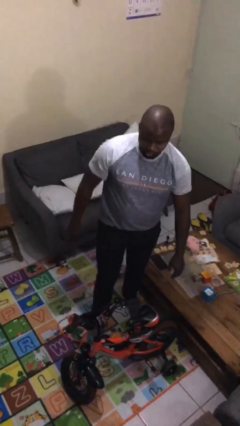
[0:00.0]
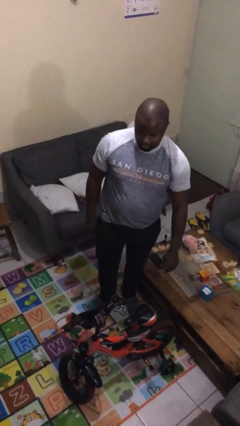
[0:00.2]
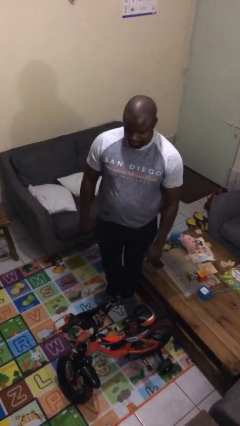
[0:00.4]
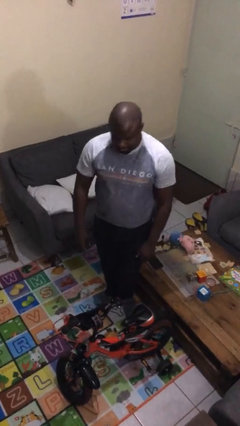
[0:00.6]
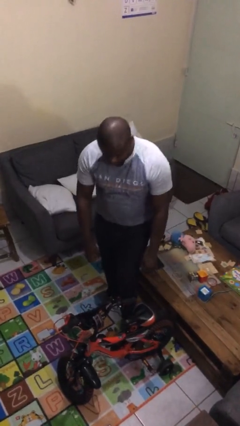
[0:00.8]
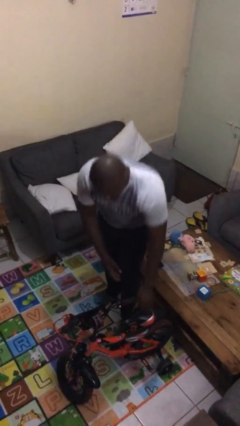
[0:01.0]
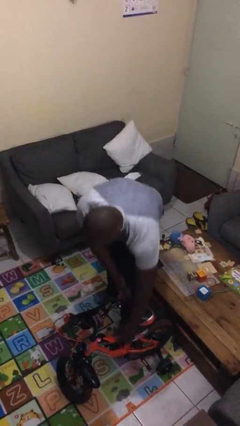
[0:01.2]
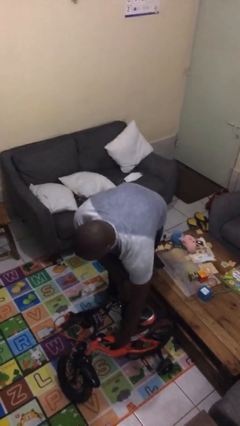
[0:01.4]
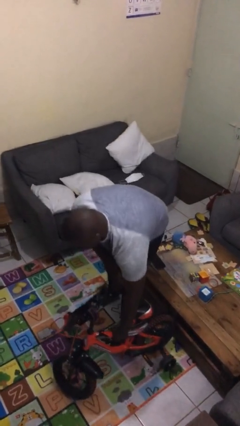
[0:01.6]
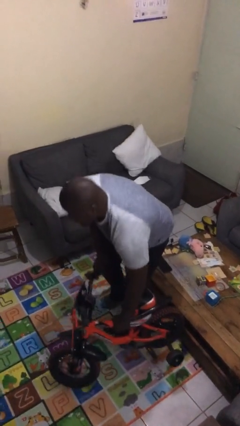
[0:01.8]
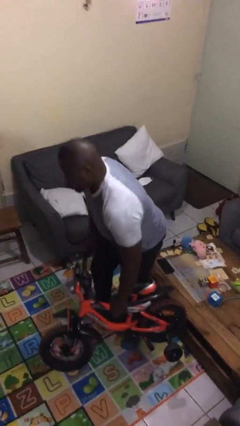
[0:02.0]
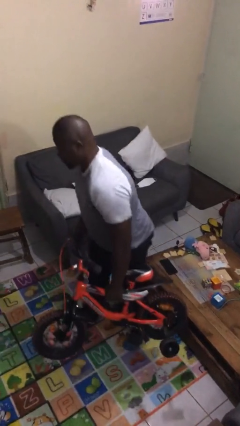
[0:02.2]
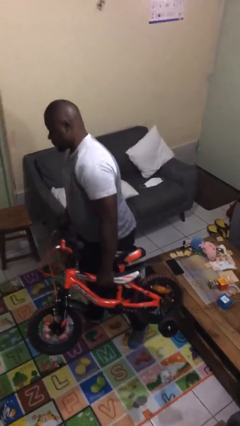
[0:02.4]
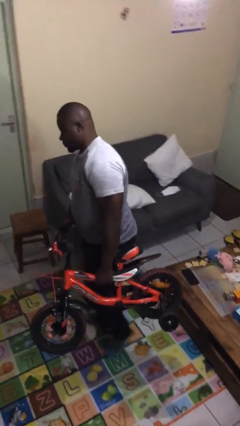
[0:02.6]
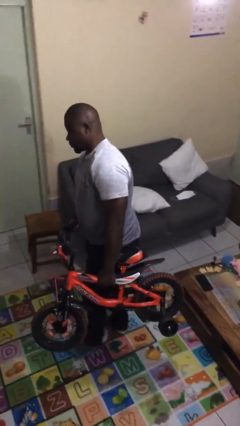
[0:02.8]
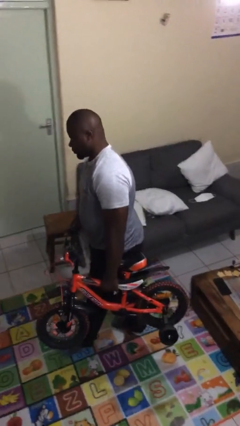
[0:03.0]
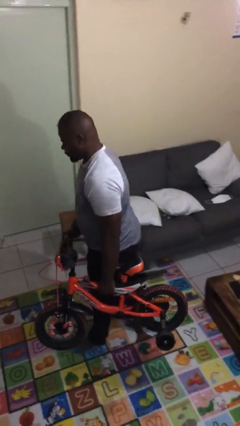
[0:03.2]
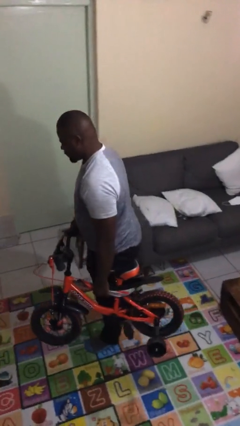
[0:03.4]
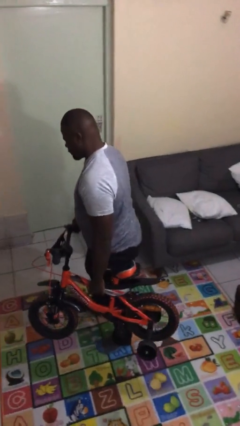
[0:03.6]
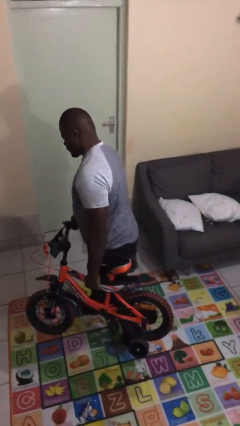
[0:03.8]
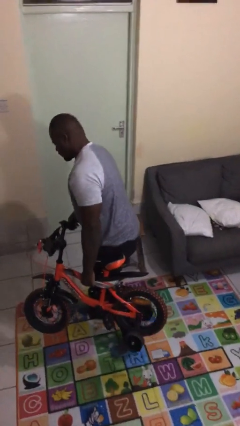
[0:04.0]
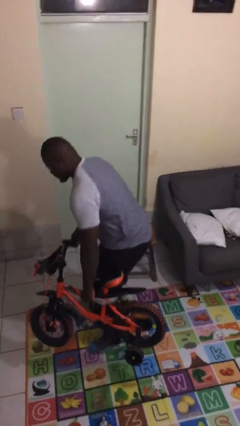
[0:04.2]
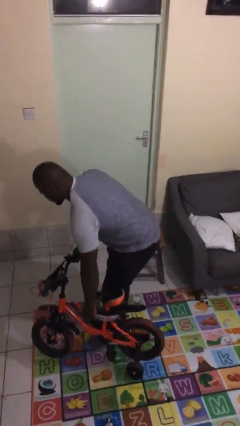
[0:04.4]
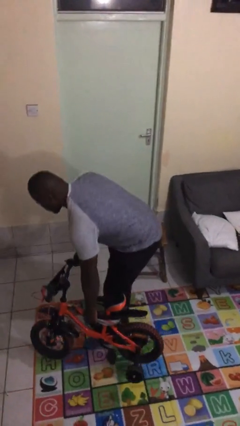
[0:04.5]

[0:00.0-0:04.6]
person carries bicycle

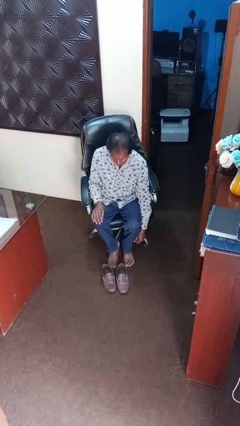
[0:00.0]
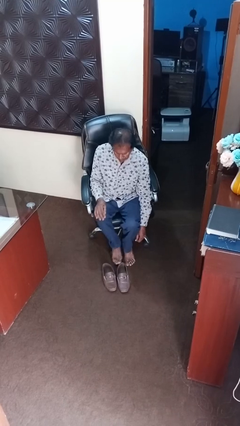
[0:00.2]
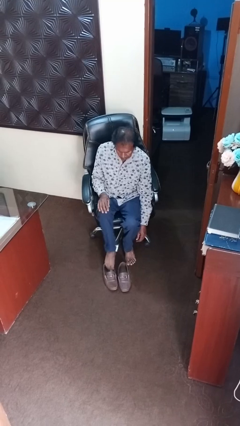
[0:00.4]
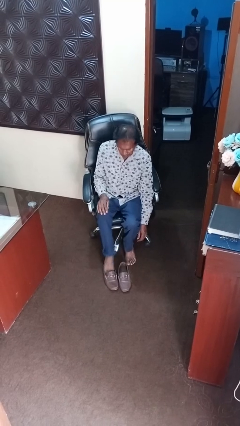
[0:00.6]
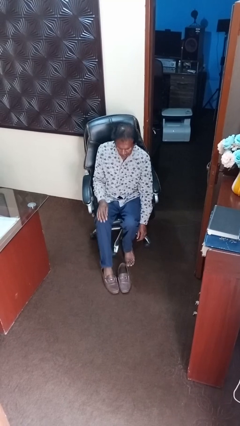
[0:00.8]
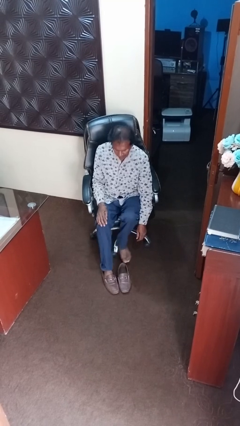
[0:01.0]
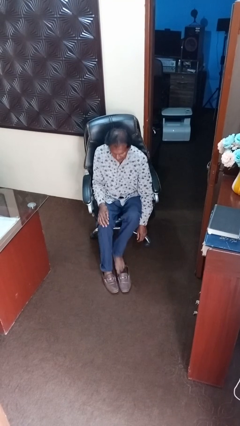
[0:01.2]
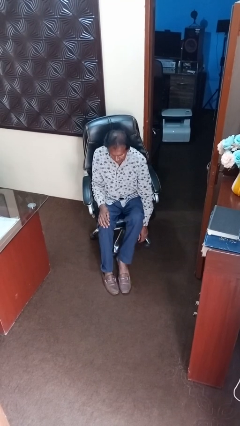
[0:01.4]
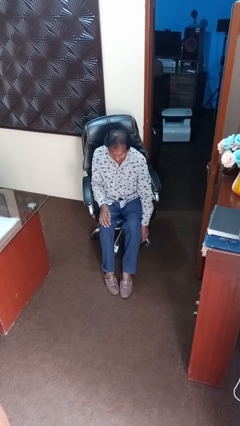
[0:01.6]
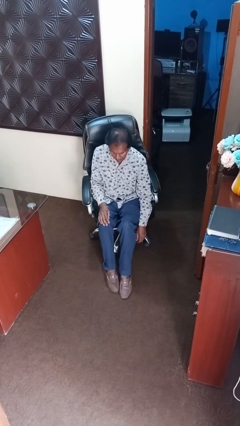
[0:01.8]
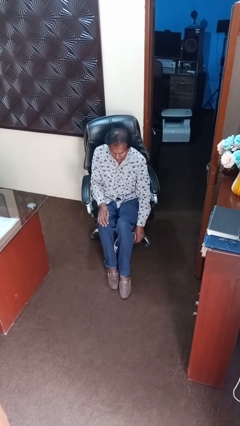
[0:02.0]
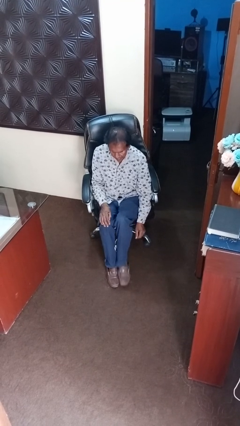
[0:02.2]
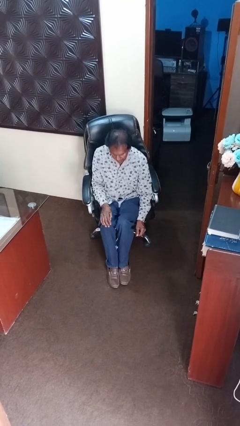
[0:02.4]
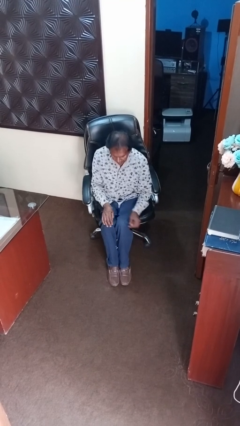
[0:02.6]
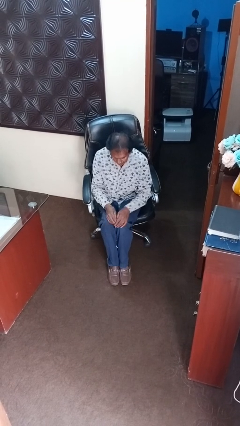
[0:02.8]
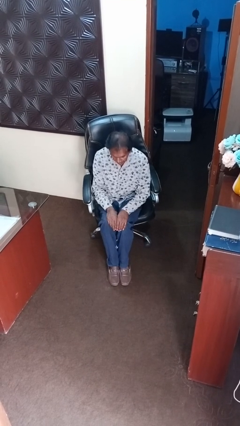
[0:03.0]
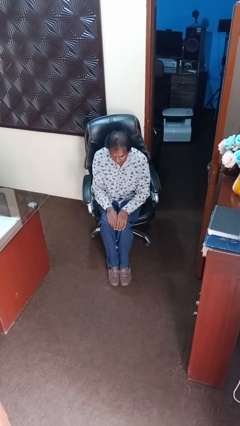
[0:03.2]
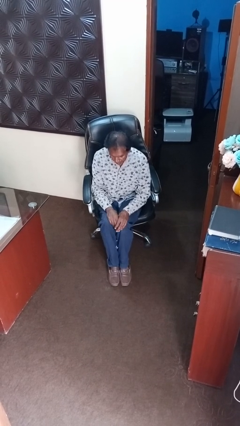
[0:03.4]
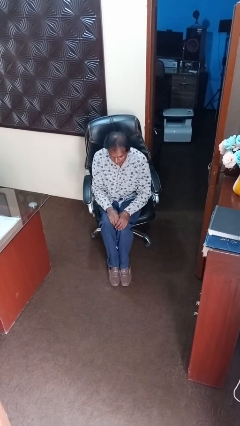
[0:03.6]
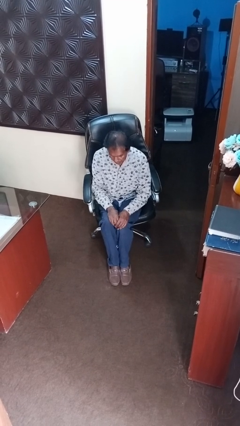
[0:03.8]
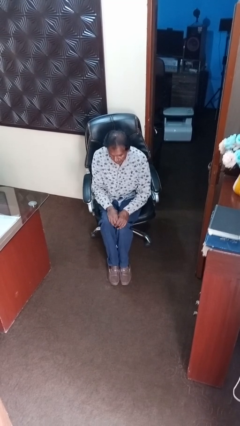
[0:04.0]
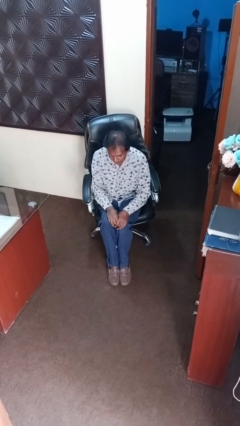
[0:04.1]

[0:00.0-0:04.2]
person puts on shoes

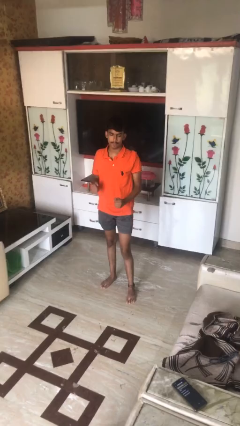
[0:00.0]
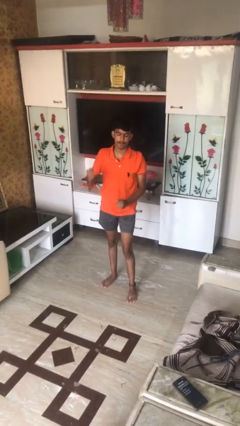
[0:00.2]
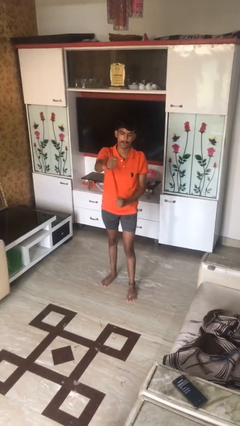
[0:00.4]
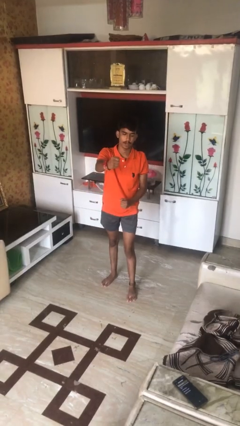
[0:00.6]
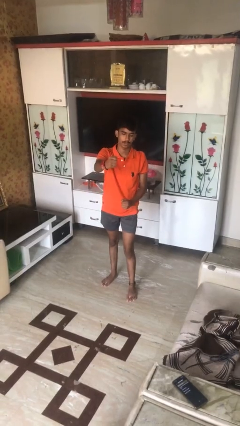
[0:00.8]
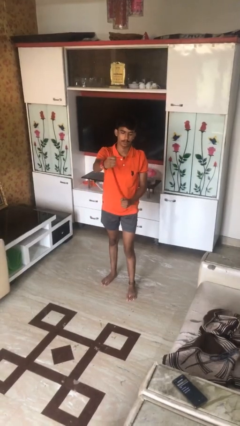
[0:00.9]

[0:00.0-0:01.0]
person punches

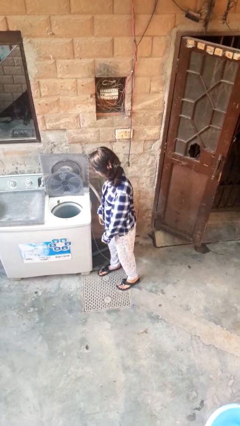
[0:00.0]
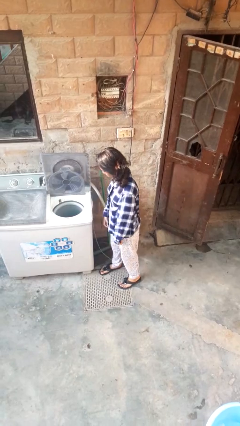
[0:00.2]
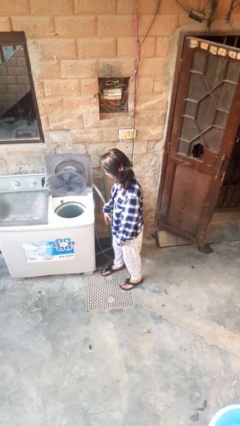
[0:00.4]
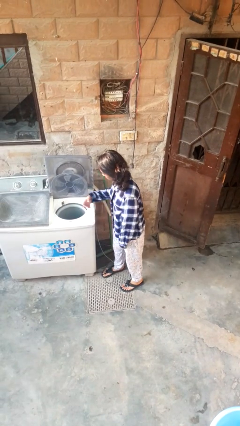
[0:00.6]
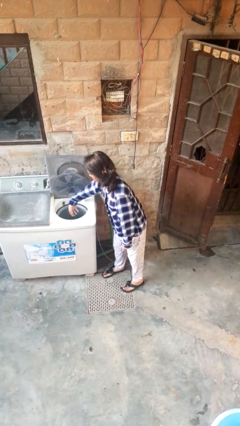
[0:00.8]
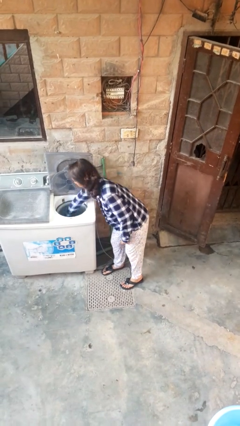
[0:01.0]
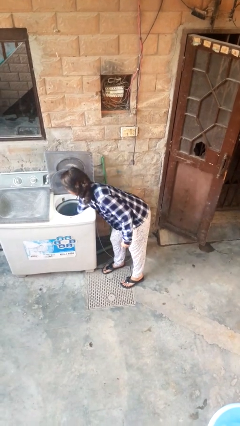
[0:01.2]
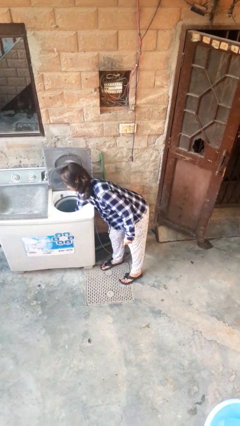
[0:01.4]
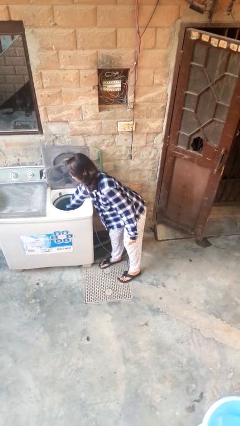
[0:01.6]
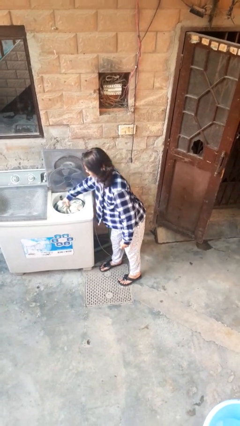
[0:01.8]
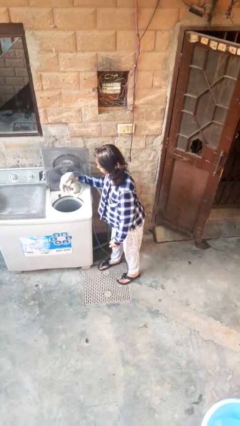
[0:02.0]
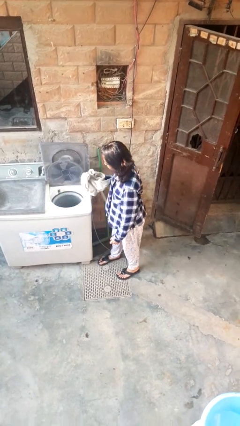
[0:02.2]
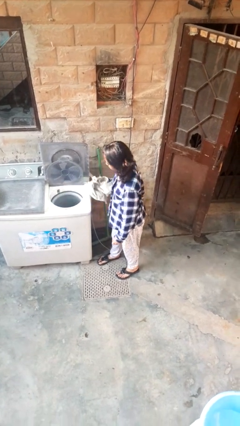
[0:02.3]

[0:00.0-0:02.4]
person unloads dryer

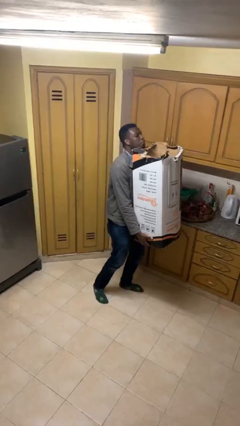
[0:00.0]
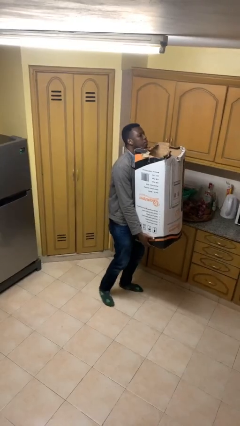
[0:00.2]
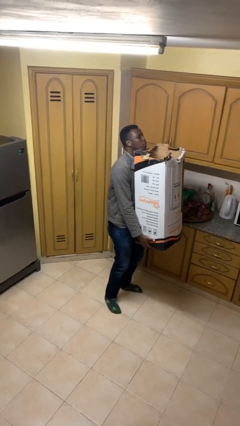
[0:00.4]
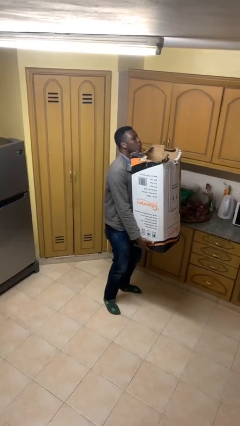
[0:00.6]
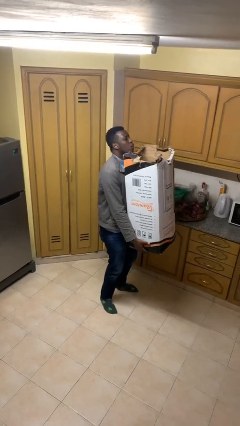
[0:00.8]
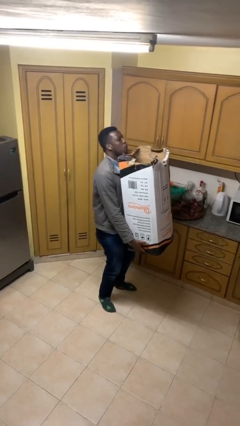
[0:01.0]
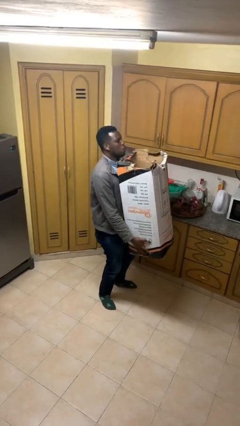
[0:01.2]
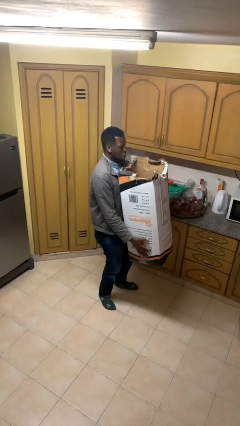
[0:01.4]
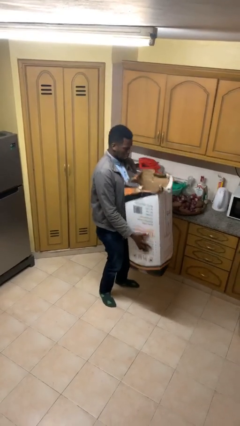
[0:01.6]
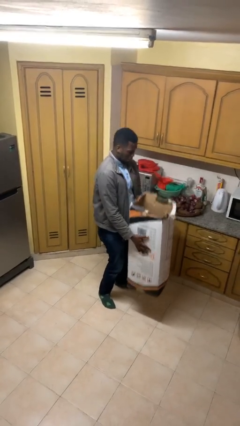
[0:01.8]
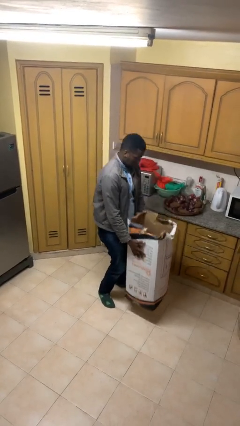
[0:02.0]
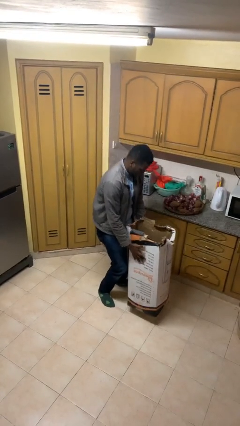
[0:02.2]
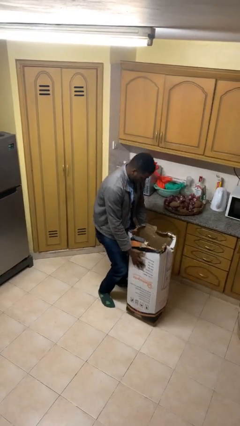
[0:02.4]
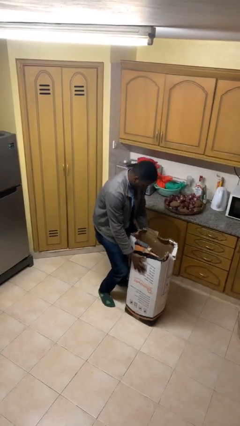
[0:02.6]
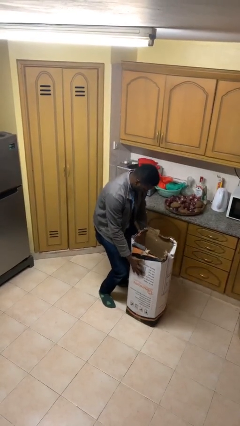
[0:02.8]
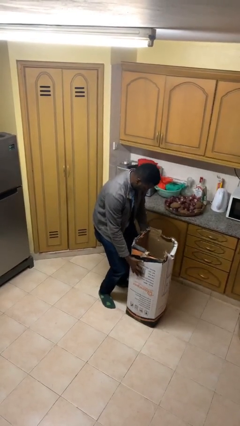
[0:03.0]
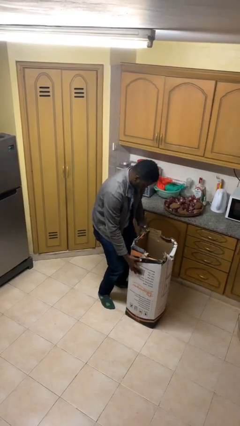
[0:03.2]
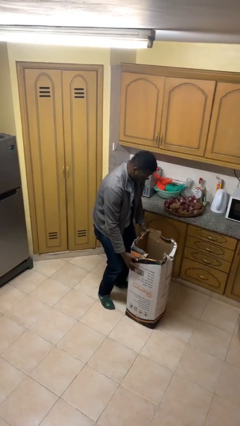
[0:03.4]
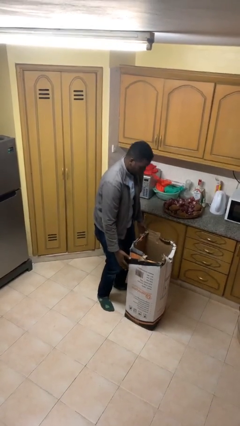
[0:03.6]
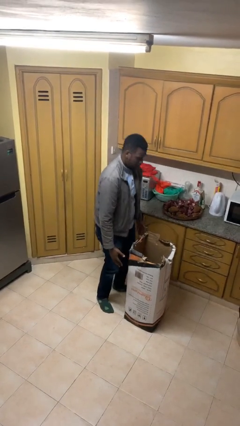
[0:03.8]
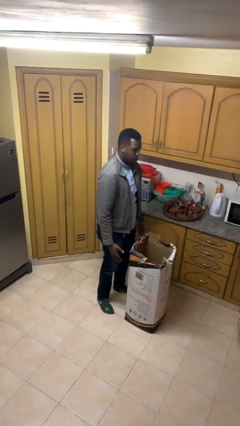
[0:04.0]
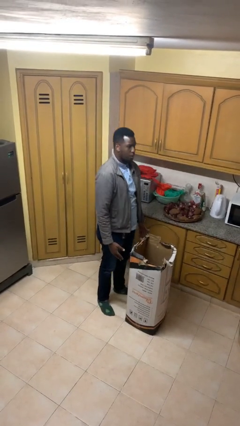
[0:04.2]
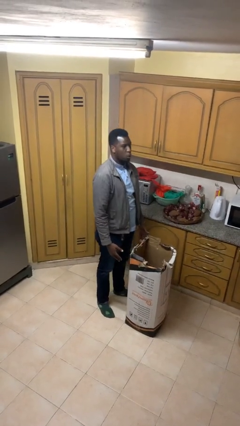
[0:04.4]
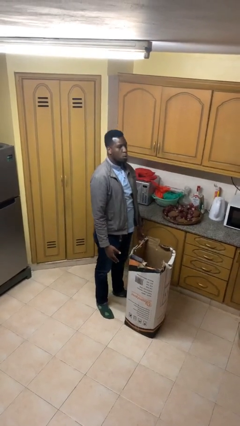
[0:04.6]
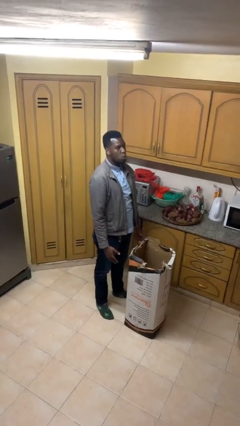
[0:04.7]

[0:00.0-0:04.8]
person puts down object on floor

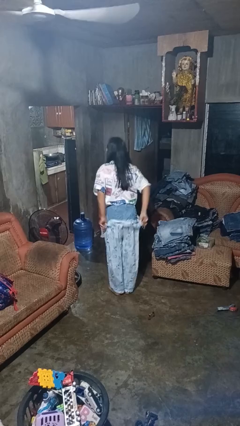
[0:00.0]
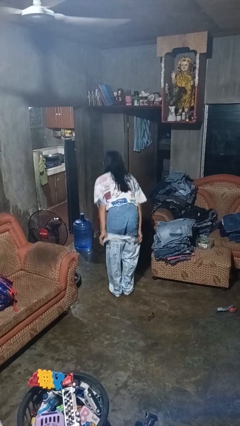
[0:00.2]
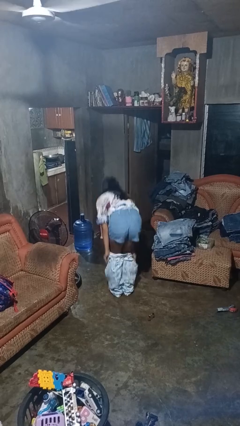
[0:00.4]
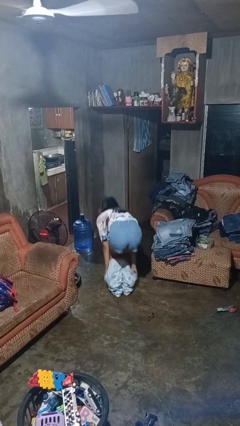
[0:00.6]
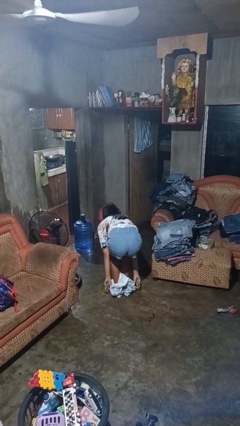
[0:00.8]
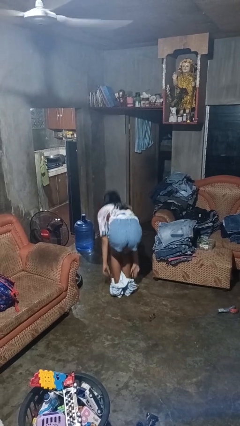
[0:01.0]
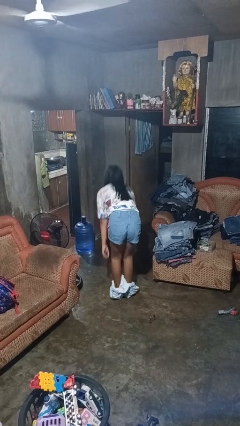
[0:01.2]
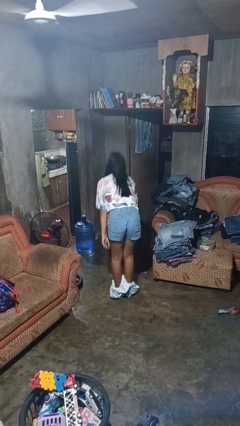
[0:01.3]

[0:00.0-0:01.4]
person takes off pants
